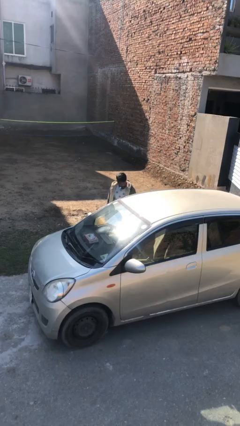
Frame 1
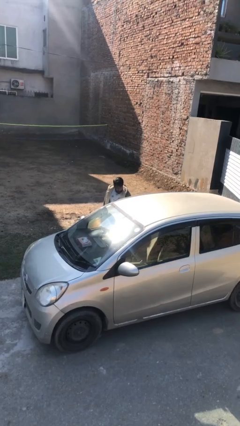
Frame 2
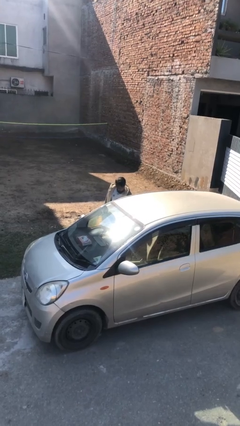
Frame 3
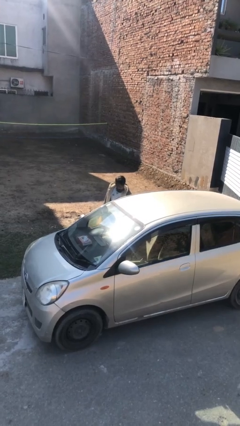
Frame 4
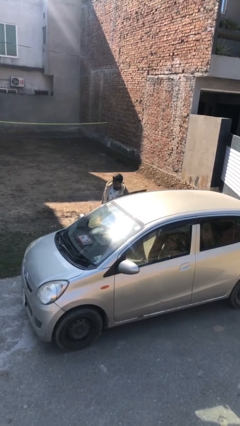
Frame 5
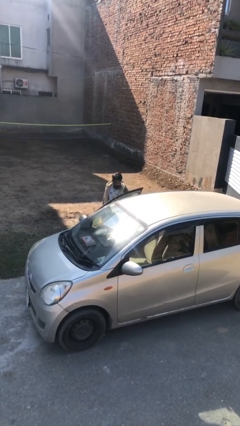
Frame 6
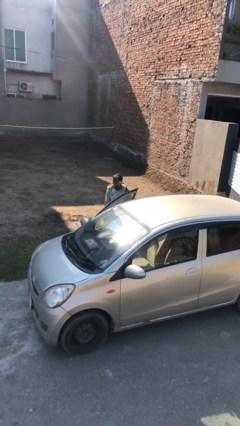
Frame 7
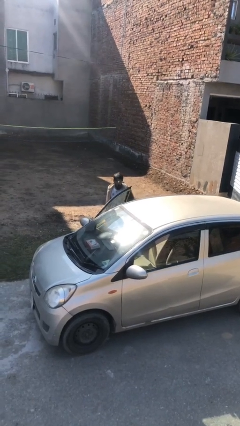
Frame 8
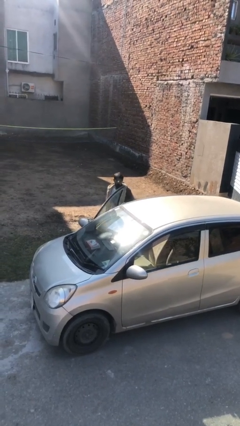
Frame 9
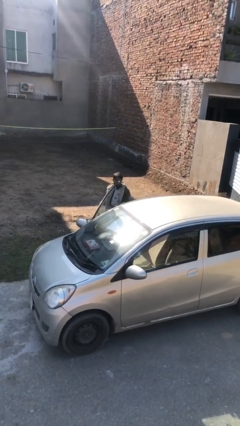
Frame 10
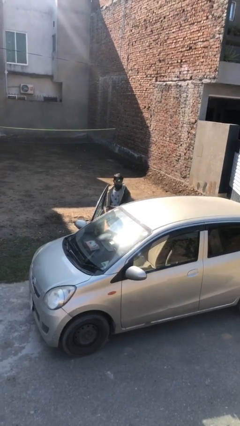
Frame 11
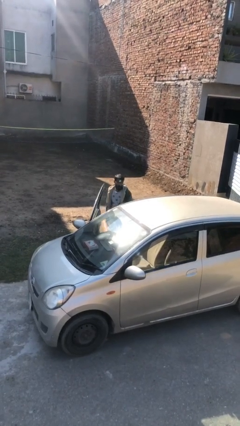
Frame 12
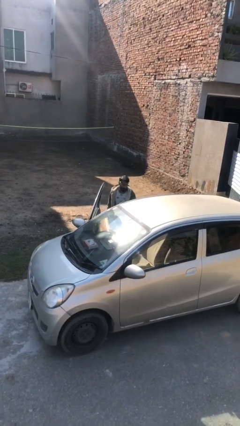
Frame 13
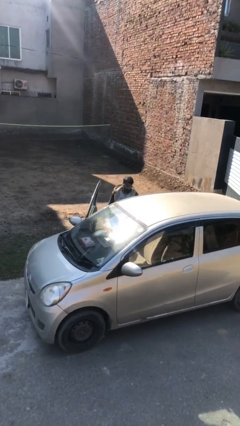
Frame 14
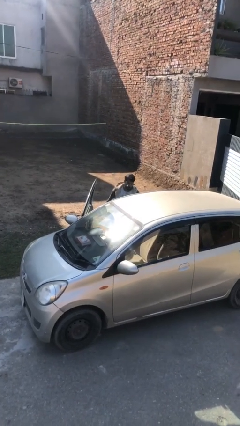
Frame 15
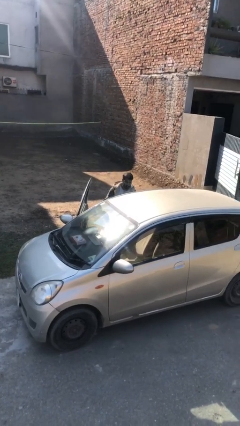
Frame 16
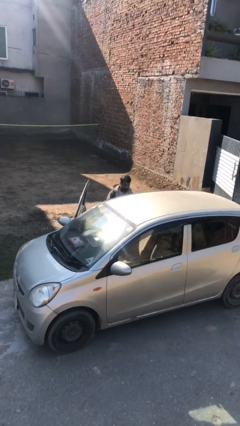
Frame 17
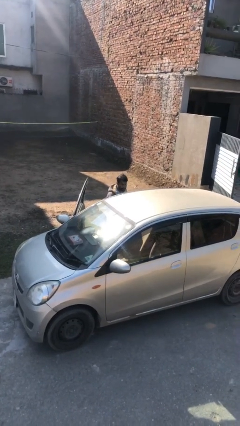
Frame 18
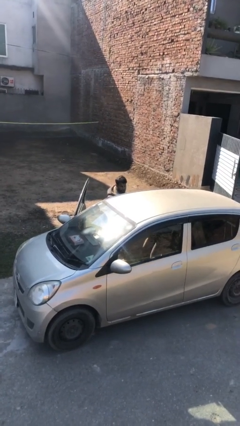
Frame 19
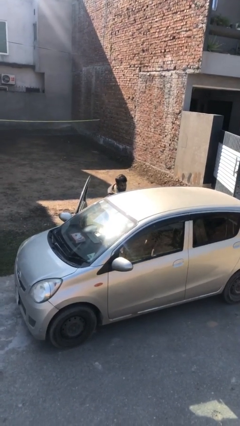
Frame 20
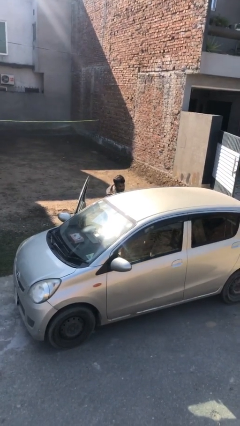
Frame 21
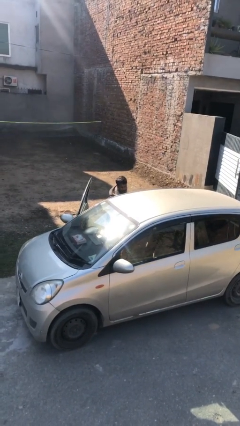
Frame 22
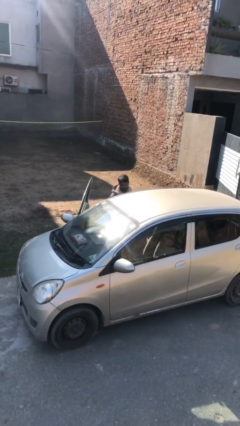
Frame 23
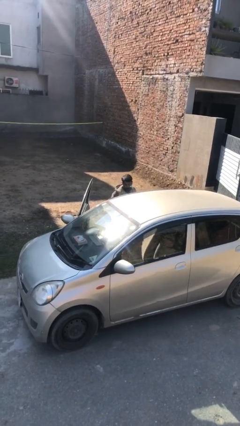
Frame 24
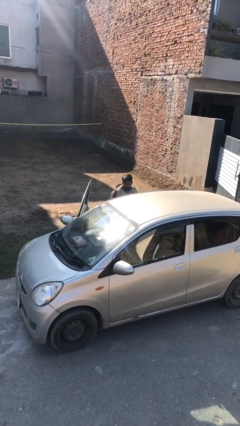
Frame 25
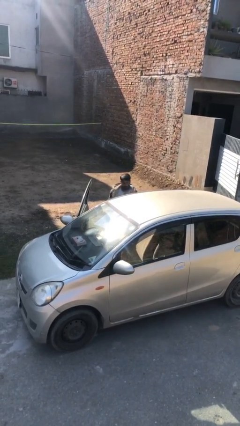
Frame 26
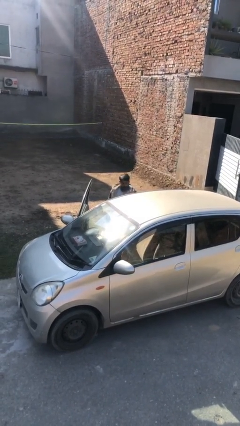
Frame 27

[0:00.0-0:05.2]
person loads car

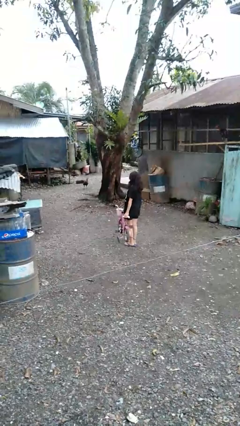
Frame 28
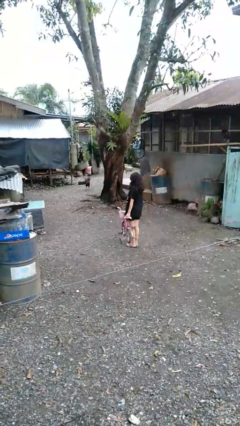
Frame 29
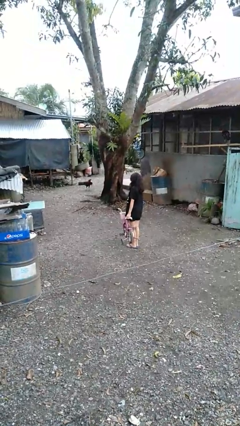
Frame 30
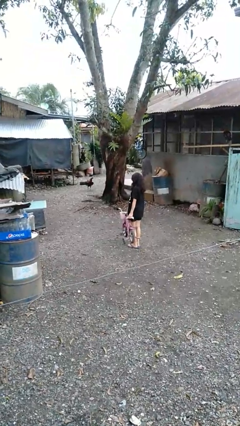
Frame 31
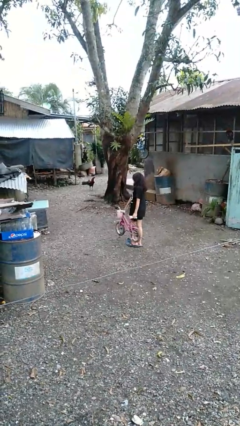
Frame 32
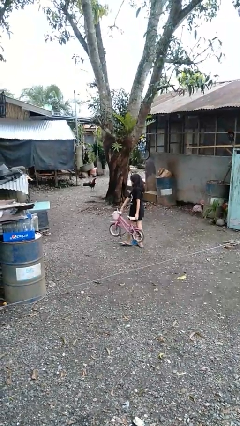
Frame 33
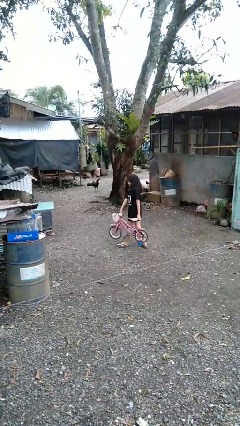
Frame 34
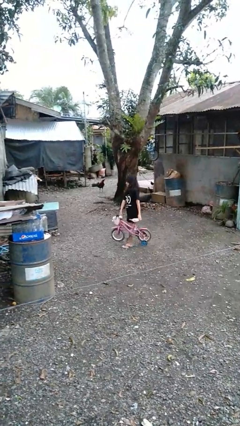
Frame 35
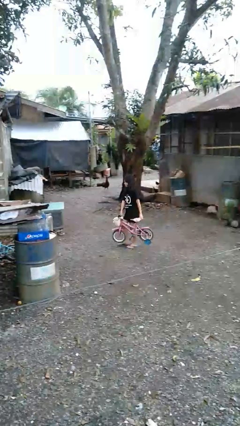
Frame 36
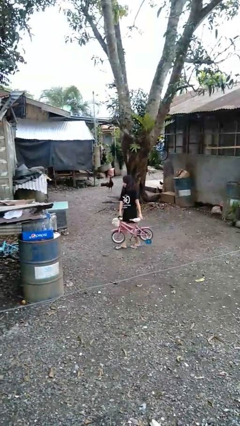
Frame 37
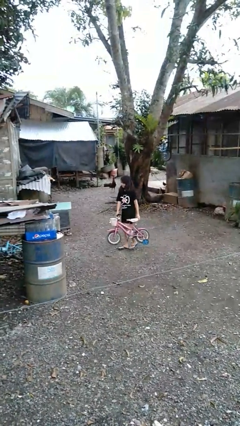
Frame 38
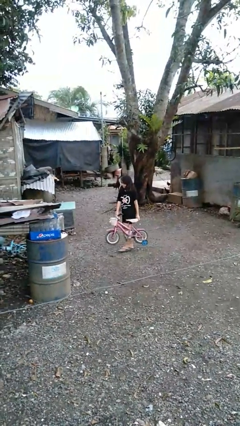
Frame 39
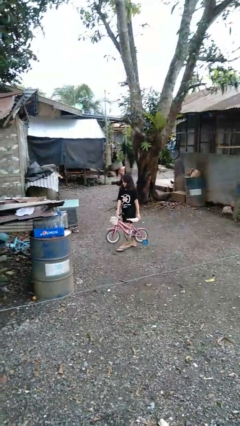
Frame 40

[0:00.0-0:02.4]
person carries bicycle

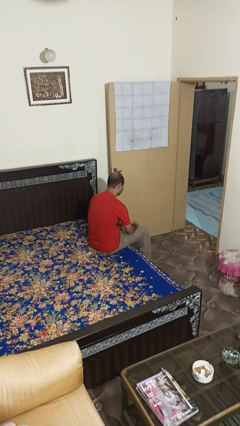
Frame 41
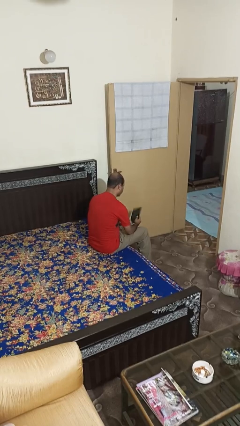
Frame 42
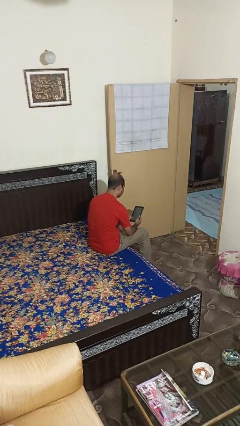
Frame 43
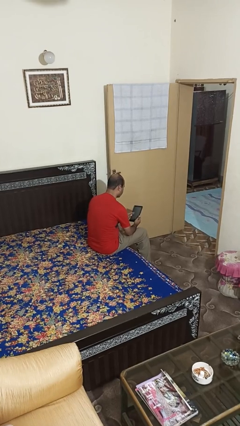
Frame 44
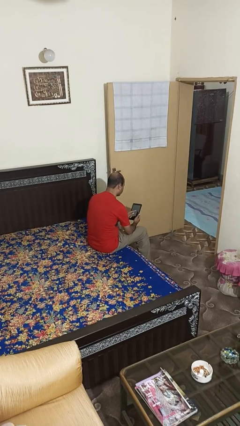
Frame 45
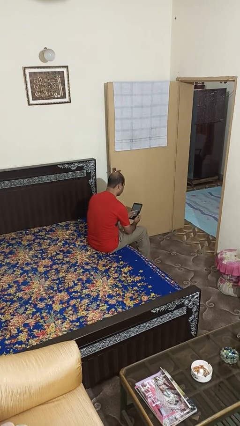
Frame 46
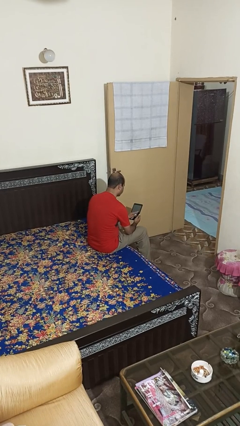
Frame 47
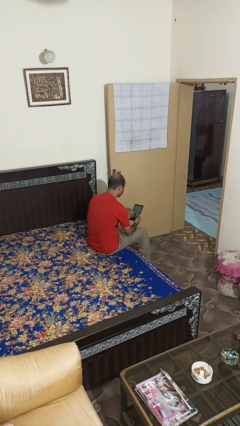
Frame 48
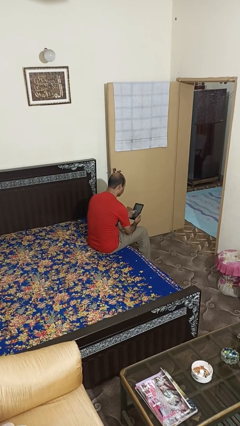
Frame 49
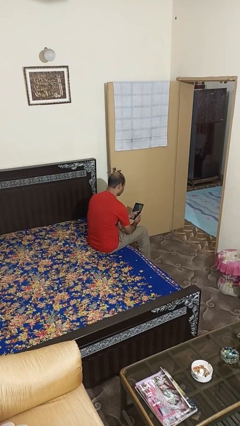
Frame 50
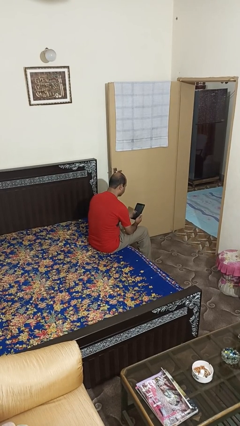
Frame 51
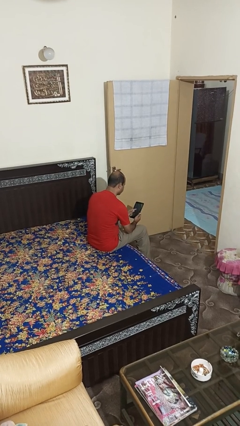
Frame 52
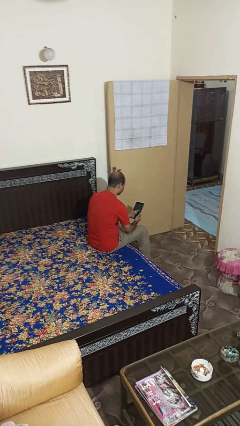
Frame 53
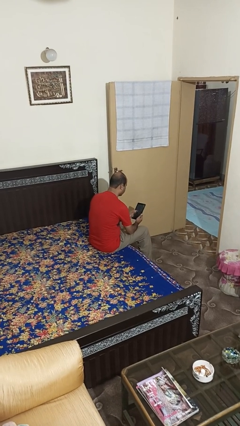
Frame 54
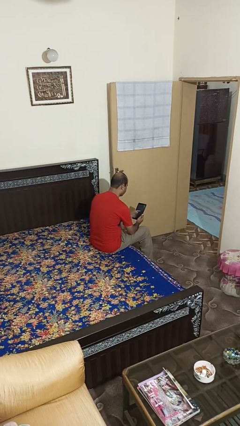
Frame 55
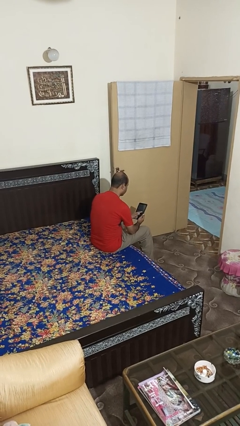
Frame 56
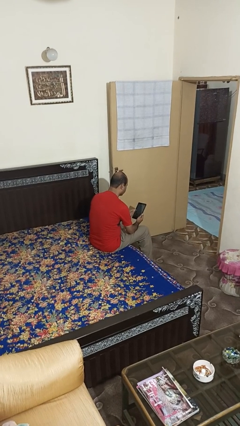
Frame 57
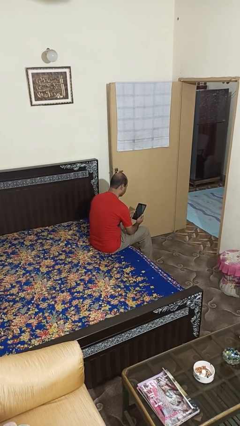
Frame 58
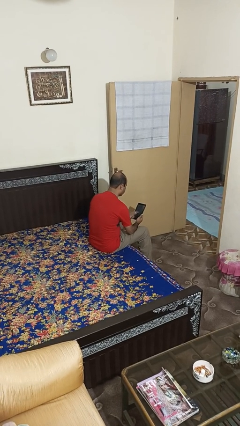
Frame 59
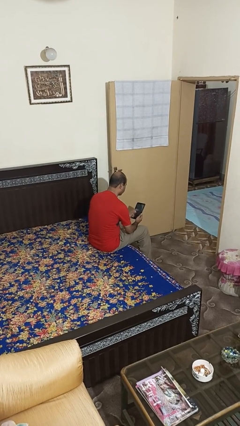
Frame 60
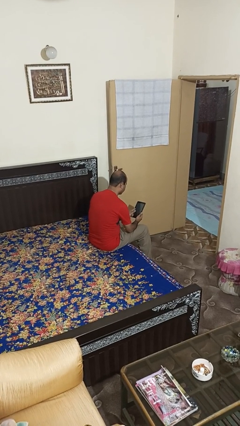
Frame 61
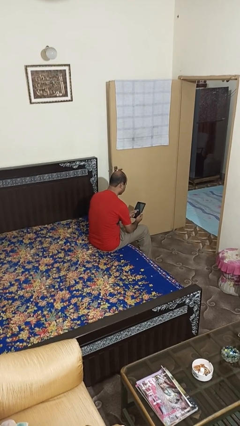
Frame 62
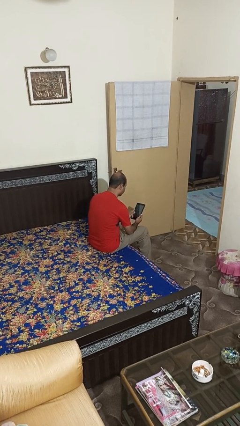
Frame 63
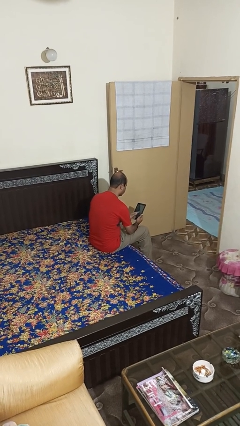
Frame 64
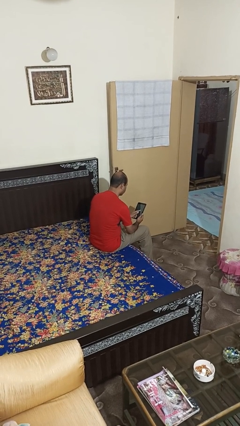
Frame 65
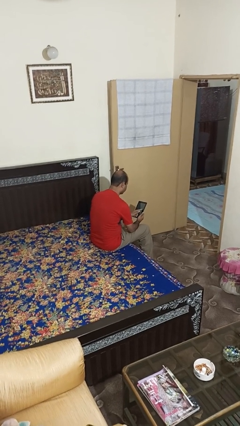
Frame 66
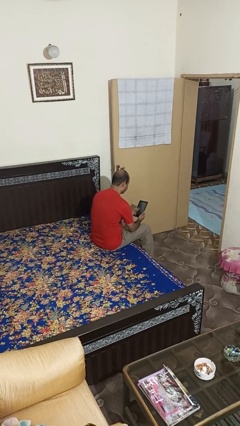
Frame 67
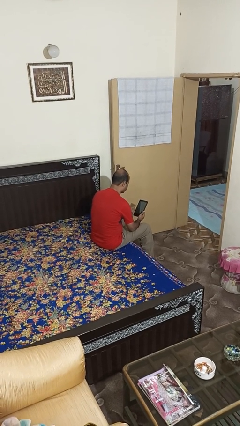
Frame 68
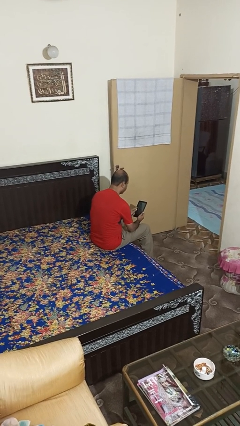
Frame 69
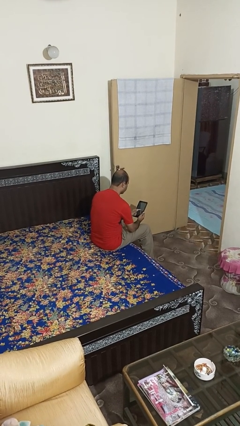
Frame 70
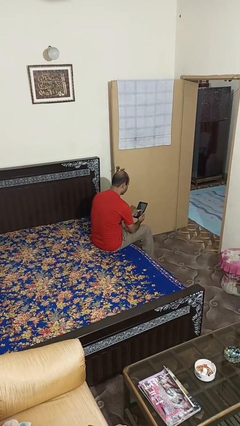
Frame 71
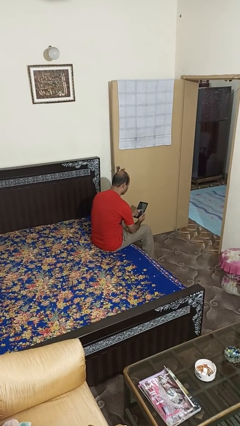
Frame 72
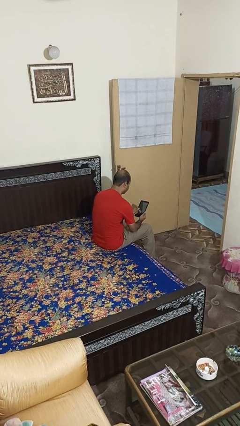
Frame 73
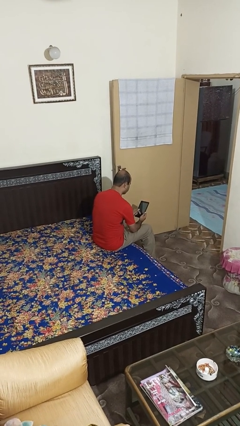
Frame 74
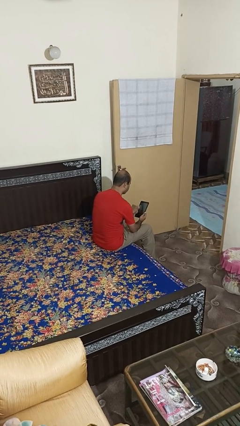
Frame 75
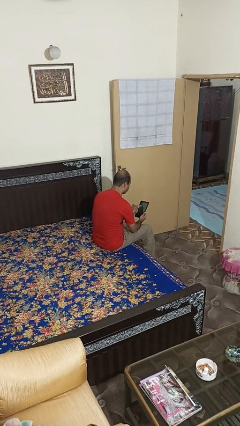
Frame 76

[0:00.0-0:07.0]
person interacts with tablet

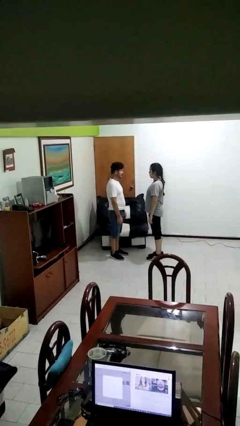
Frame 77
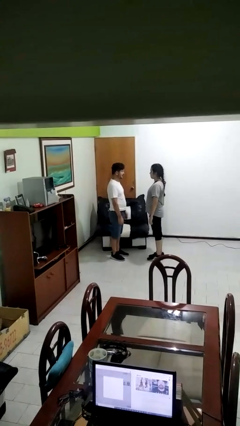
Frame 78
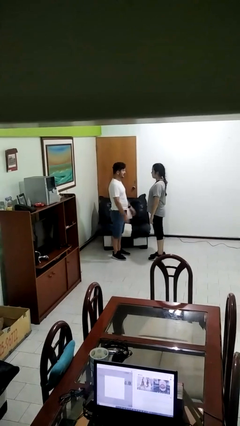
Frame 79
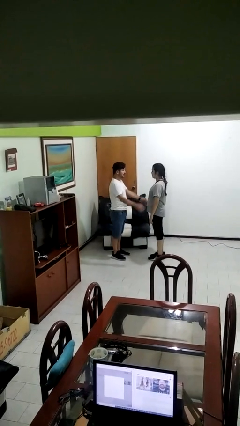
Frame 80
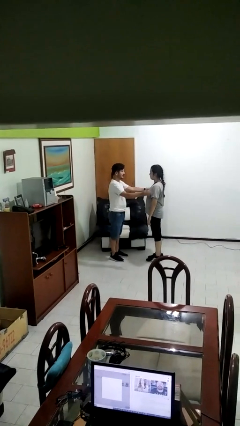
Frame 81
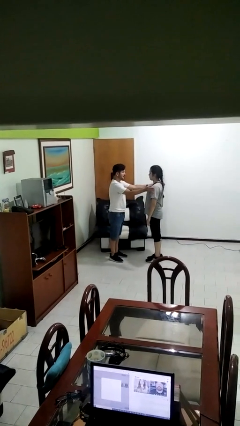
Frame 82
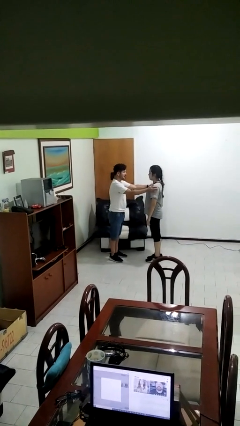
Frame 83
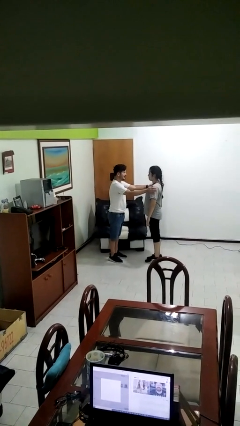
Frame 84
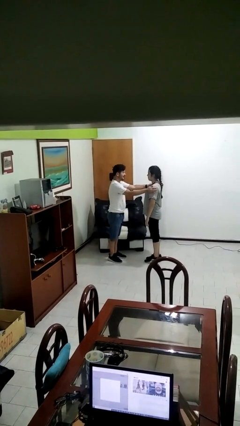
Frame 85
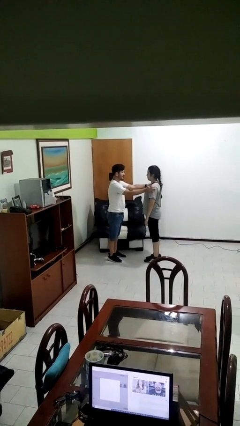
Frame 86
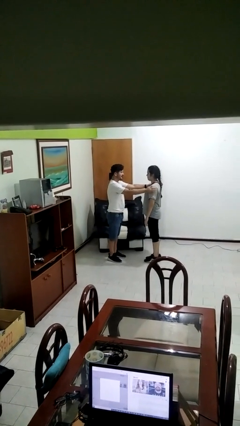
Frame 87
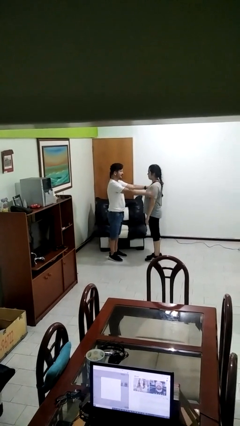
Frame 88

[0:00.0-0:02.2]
person pounds shoulders of person

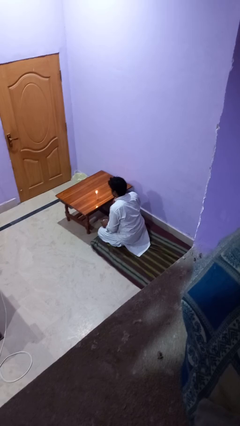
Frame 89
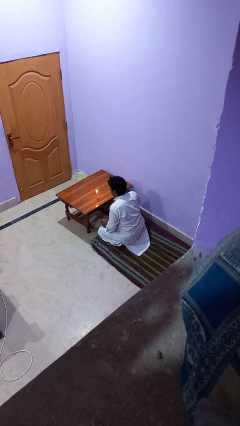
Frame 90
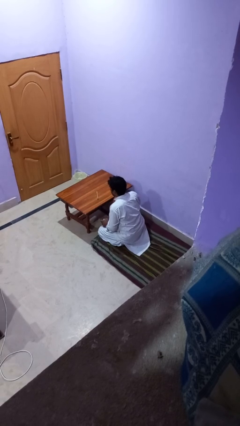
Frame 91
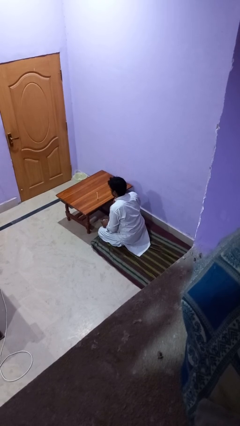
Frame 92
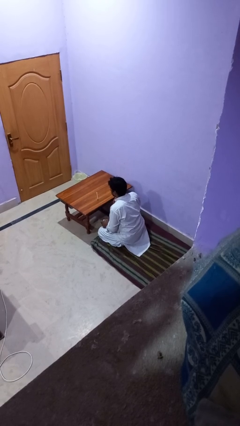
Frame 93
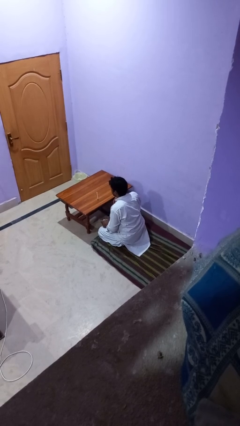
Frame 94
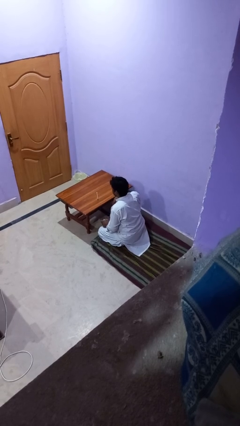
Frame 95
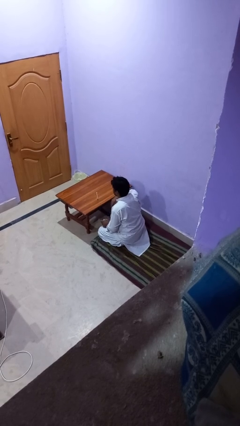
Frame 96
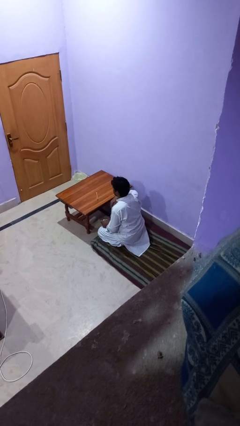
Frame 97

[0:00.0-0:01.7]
person extinguishes candle
